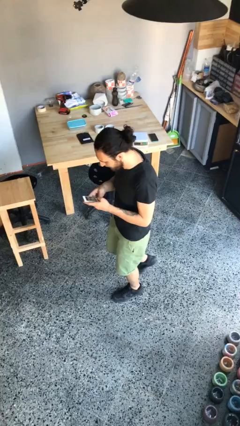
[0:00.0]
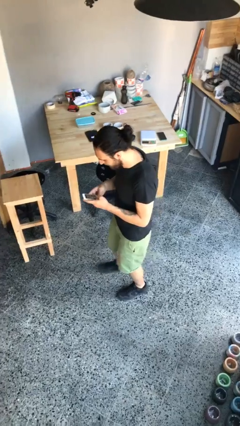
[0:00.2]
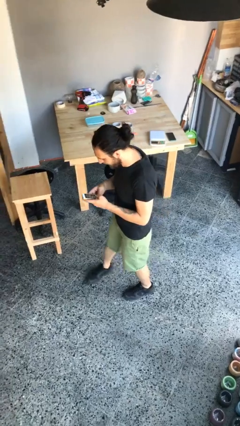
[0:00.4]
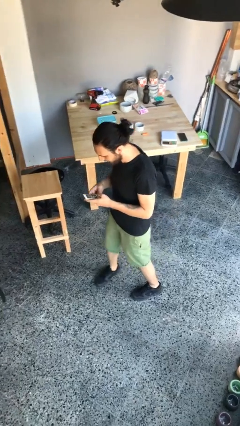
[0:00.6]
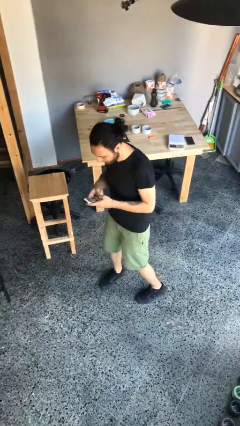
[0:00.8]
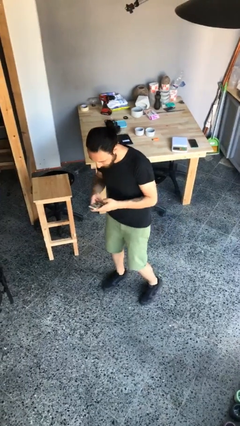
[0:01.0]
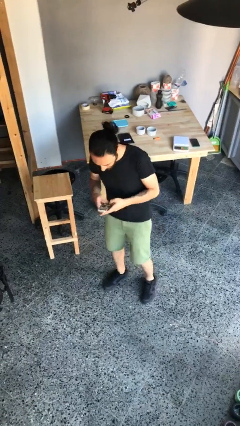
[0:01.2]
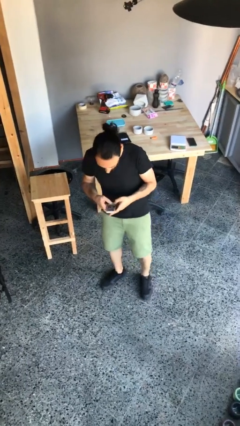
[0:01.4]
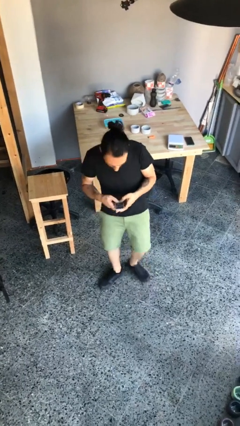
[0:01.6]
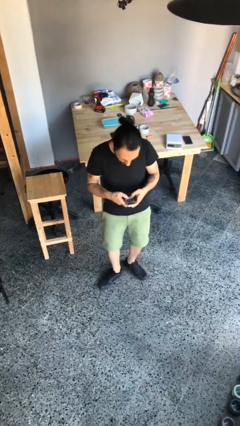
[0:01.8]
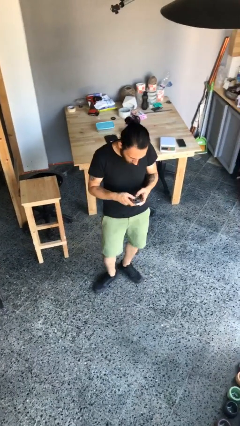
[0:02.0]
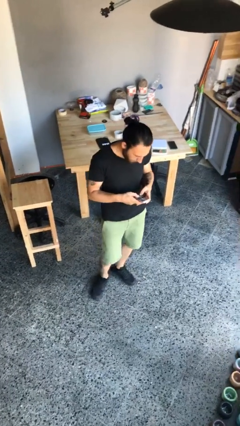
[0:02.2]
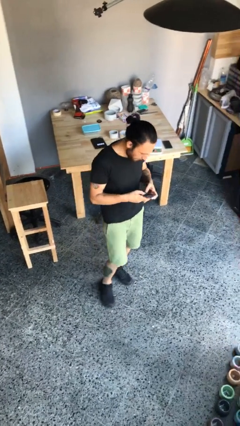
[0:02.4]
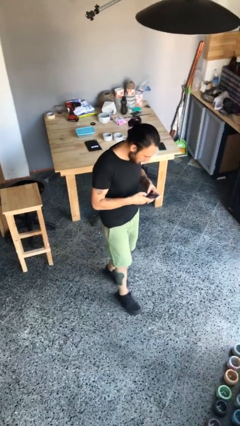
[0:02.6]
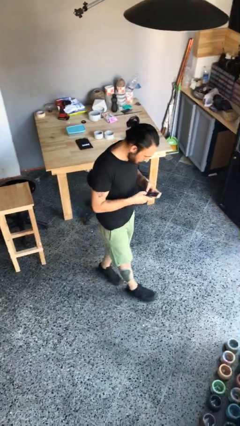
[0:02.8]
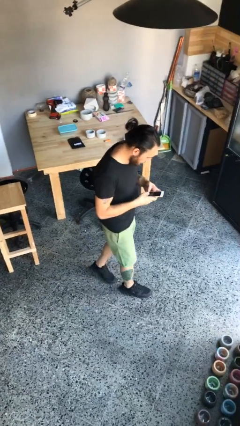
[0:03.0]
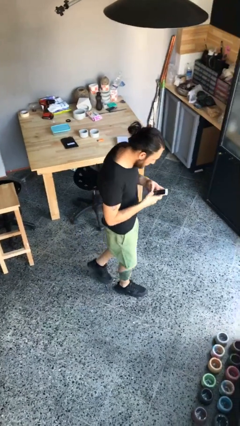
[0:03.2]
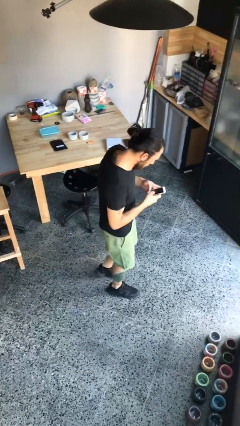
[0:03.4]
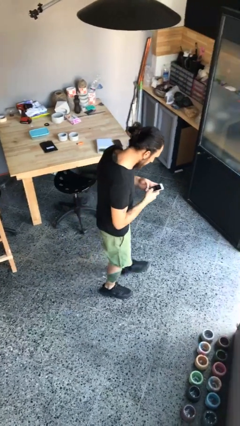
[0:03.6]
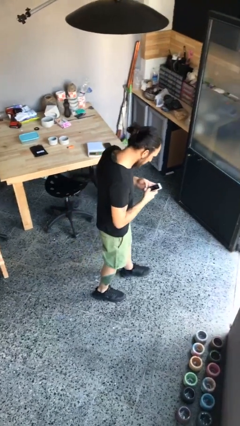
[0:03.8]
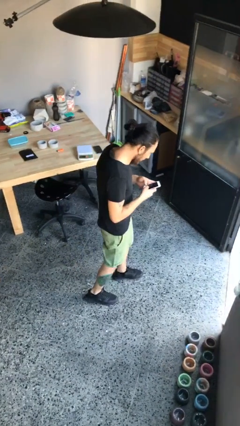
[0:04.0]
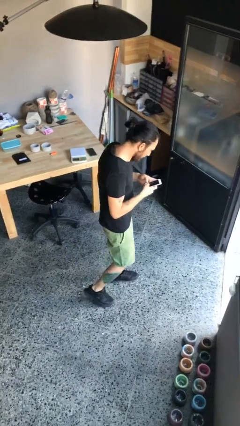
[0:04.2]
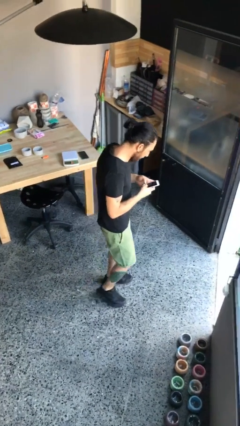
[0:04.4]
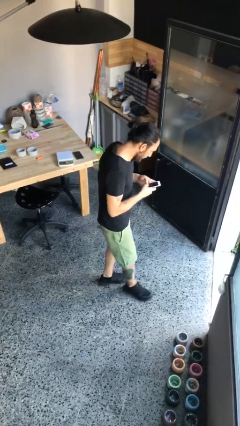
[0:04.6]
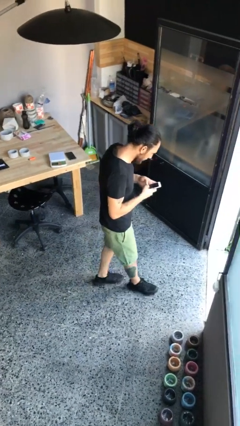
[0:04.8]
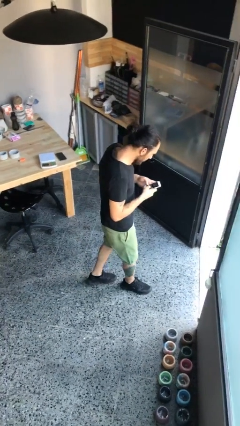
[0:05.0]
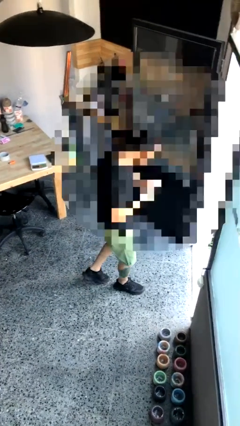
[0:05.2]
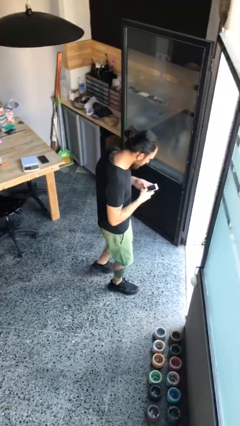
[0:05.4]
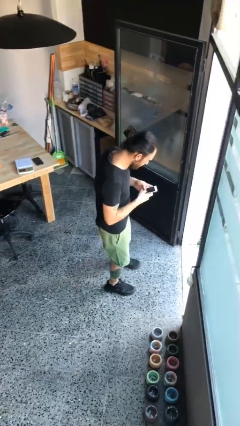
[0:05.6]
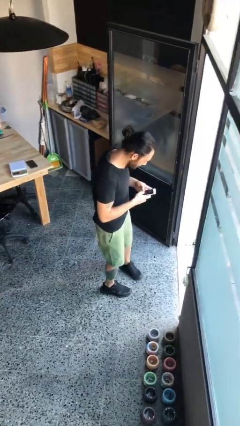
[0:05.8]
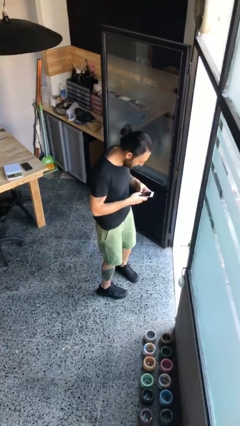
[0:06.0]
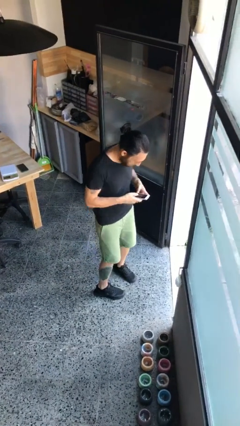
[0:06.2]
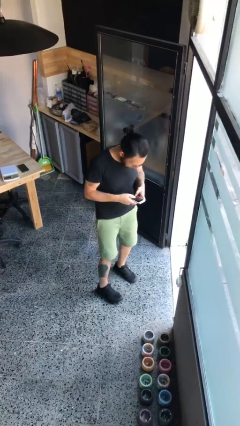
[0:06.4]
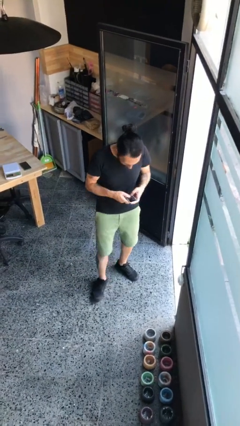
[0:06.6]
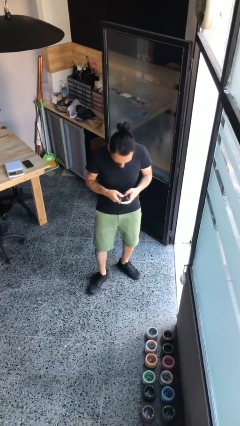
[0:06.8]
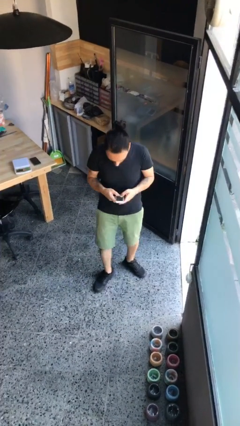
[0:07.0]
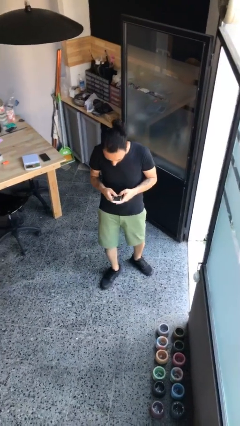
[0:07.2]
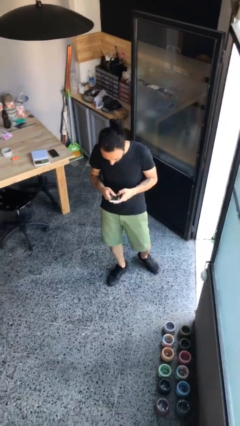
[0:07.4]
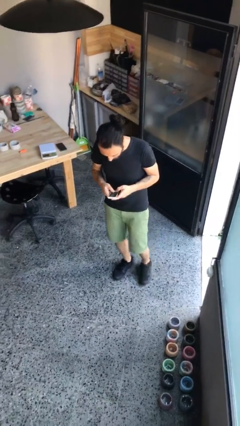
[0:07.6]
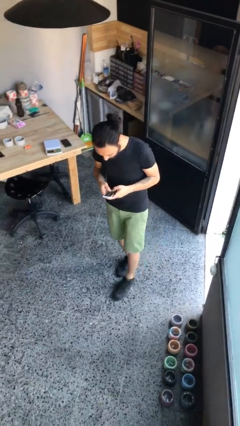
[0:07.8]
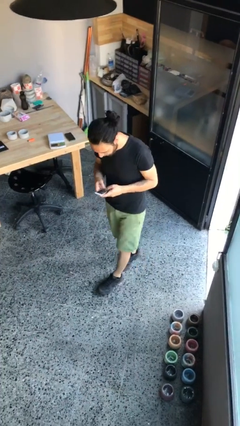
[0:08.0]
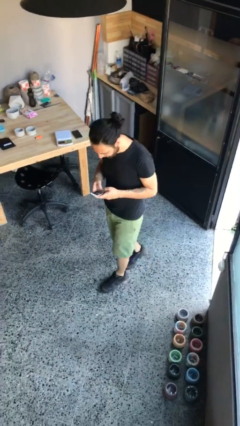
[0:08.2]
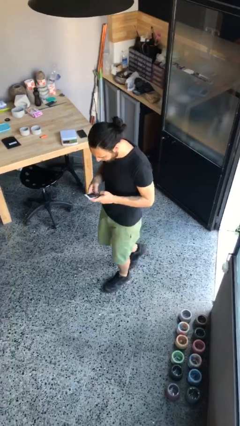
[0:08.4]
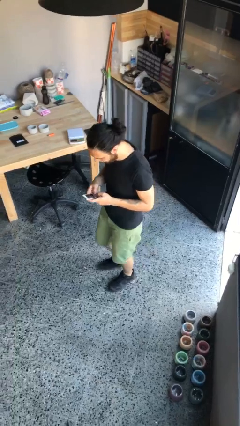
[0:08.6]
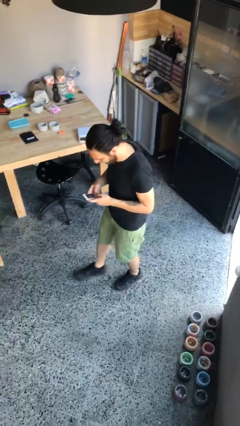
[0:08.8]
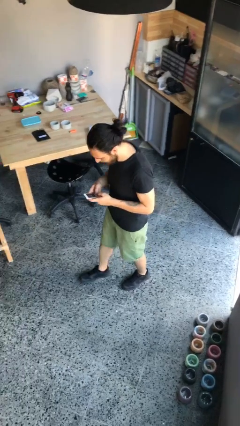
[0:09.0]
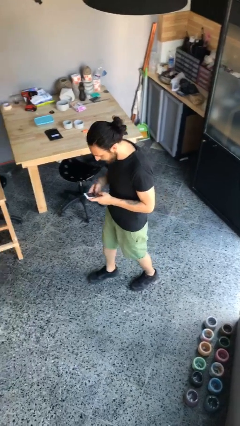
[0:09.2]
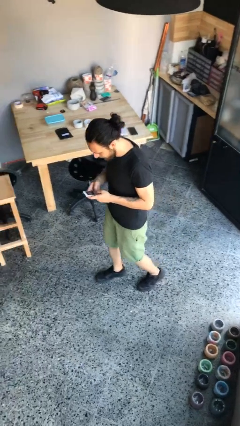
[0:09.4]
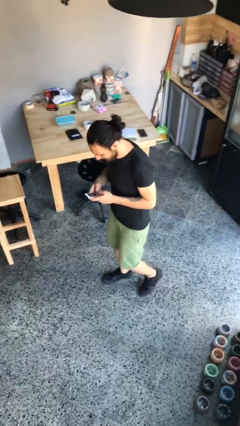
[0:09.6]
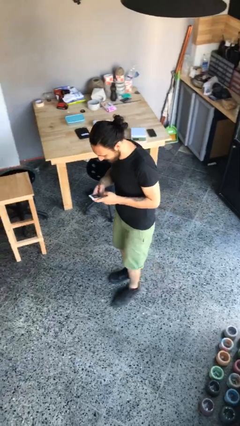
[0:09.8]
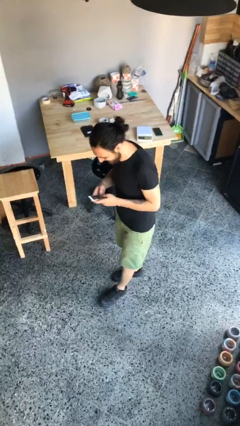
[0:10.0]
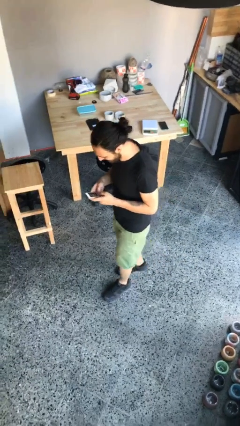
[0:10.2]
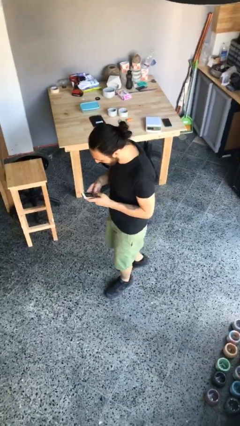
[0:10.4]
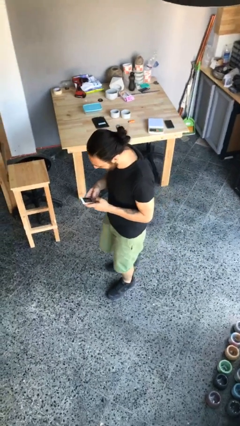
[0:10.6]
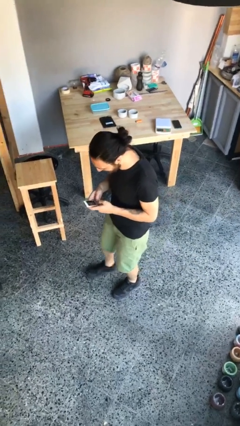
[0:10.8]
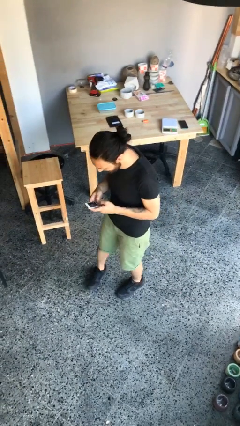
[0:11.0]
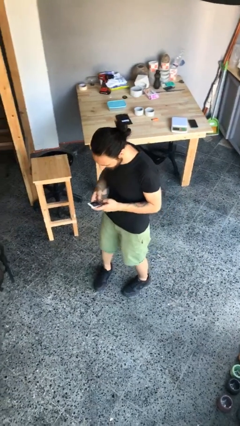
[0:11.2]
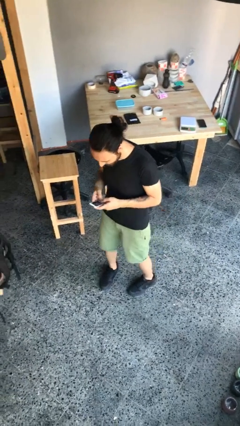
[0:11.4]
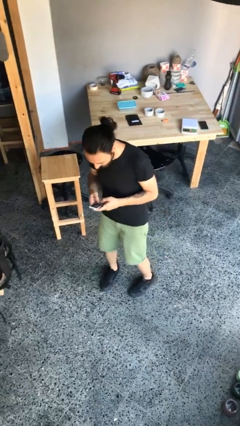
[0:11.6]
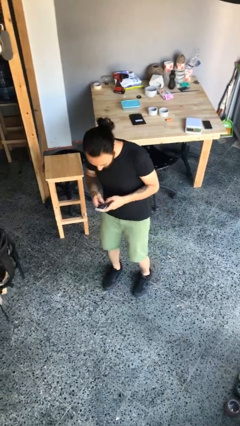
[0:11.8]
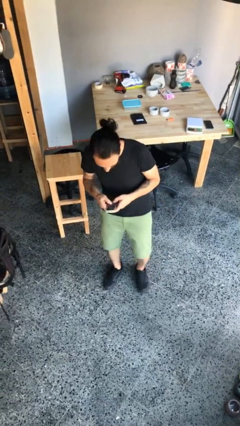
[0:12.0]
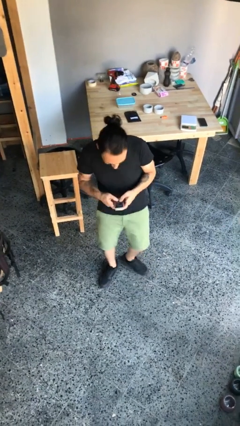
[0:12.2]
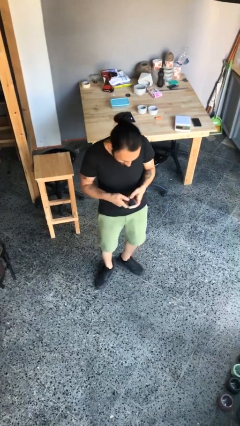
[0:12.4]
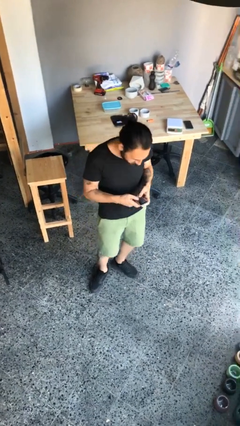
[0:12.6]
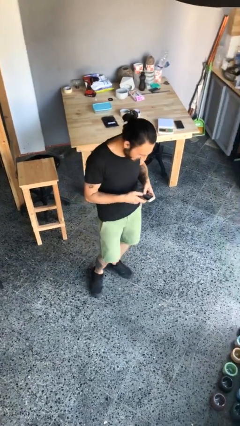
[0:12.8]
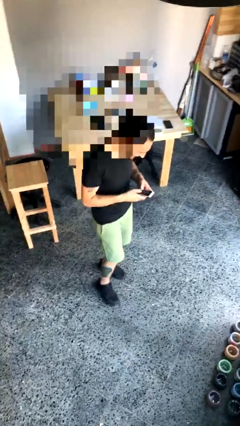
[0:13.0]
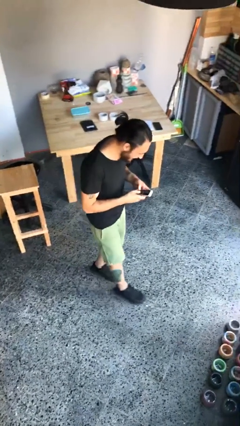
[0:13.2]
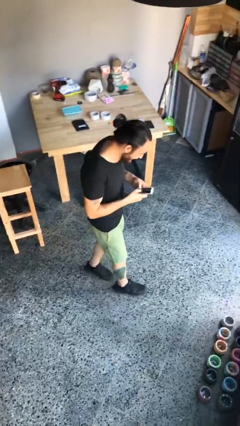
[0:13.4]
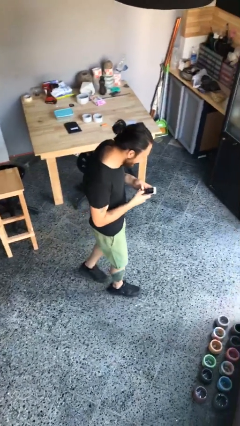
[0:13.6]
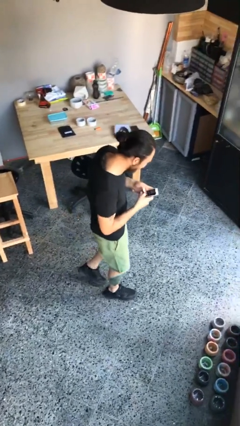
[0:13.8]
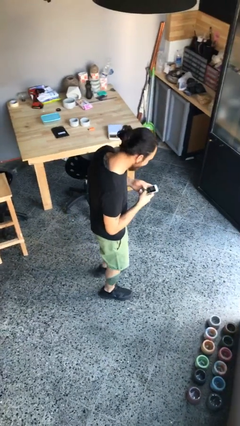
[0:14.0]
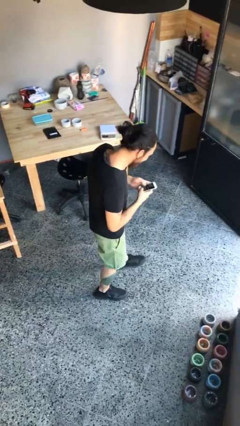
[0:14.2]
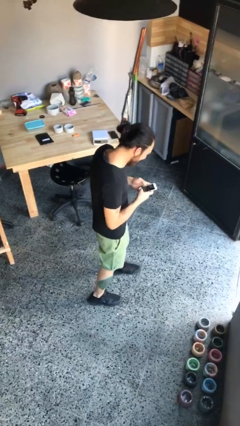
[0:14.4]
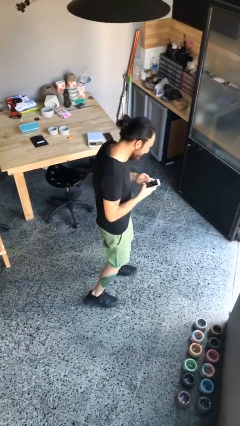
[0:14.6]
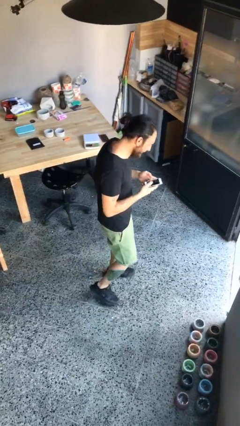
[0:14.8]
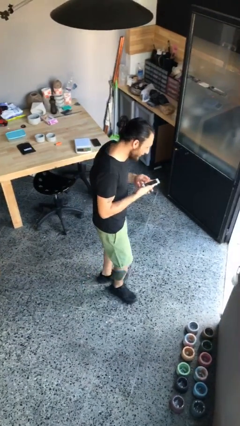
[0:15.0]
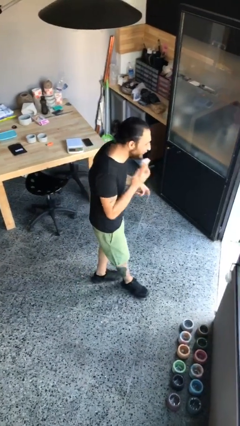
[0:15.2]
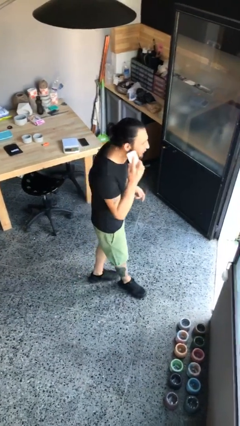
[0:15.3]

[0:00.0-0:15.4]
person texts on phone

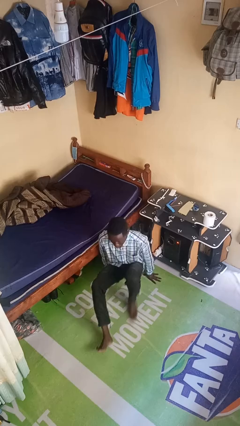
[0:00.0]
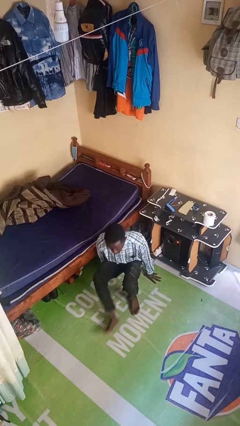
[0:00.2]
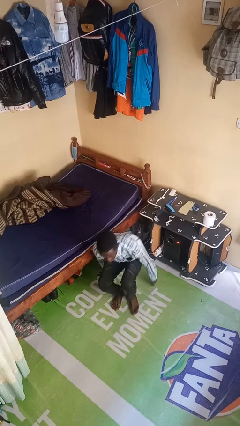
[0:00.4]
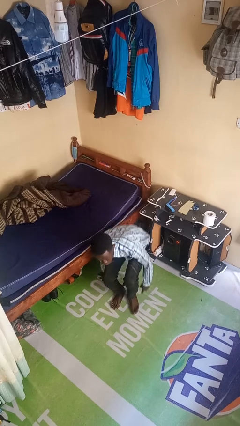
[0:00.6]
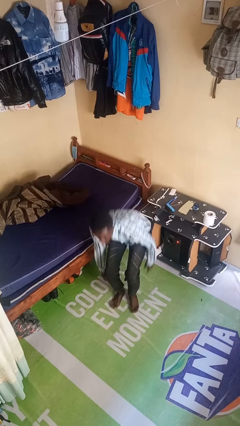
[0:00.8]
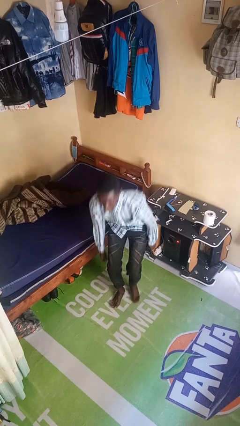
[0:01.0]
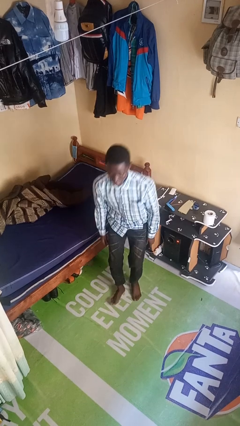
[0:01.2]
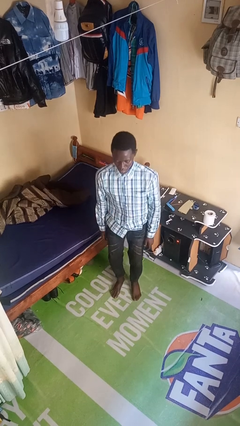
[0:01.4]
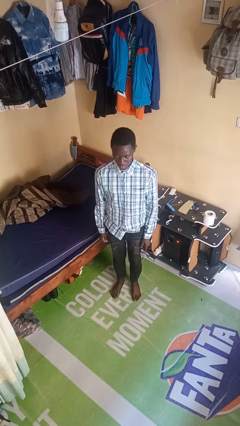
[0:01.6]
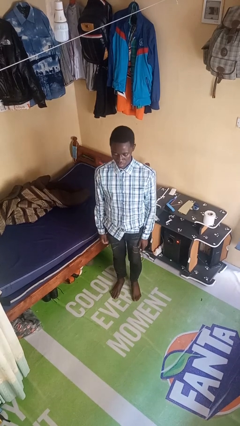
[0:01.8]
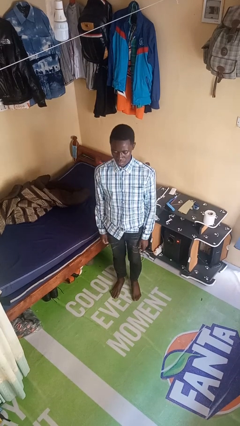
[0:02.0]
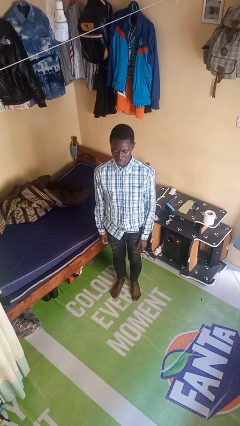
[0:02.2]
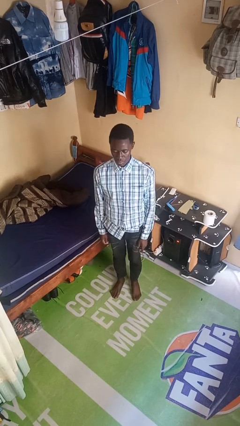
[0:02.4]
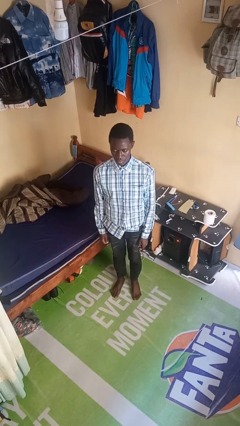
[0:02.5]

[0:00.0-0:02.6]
person stands up from floor
